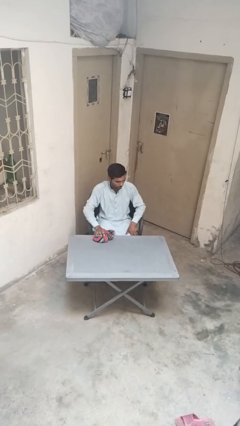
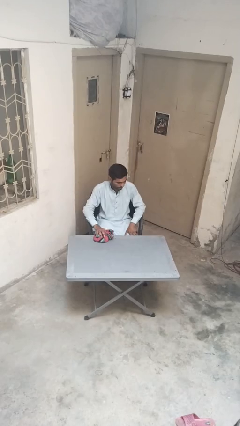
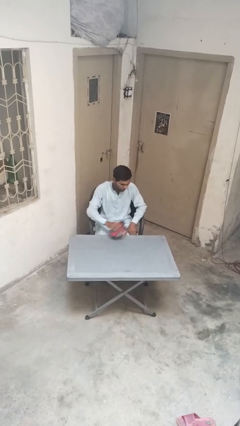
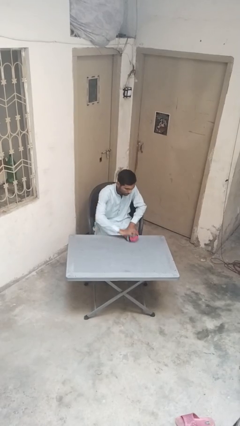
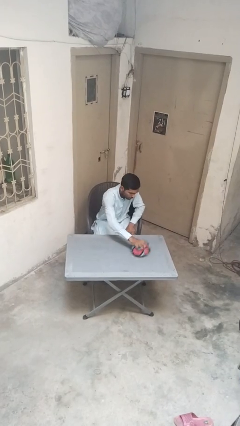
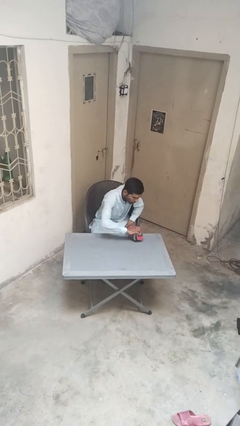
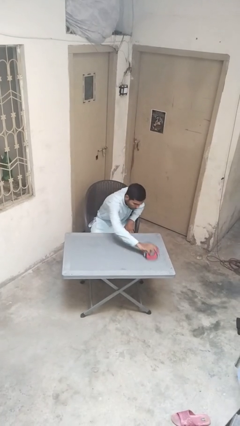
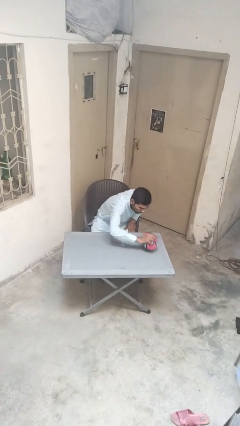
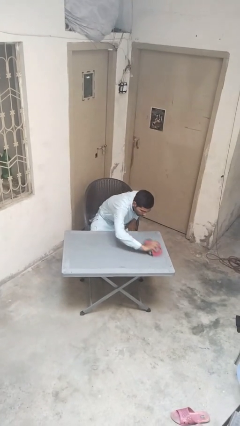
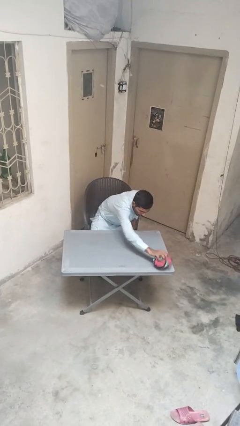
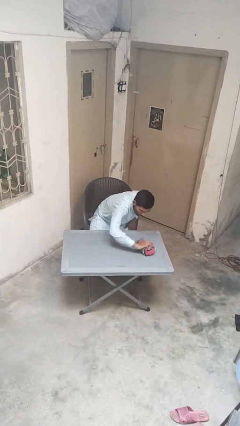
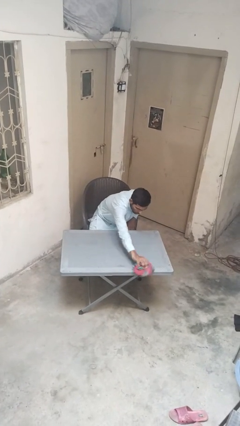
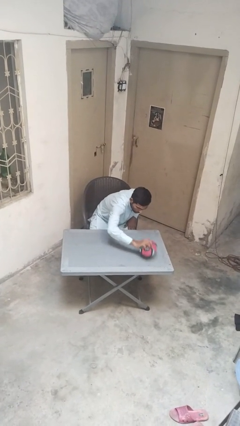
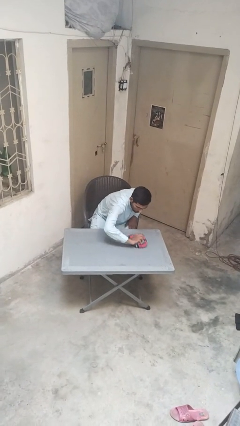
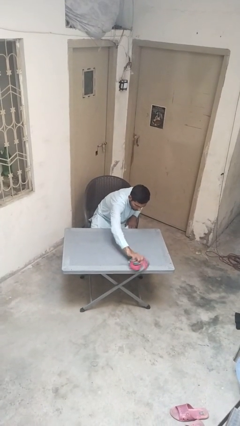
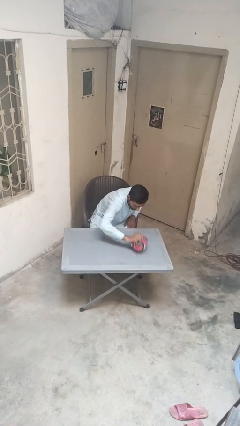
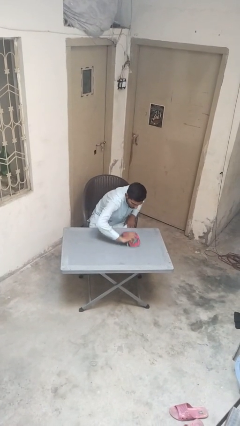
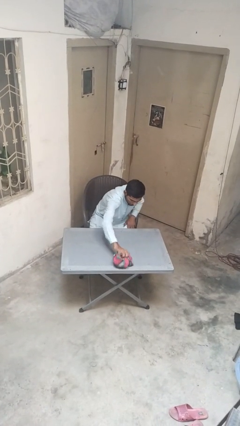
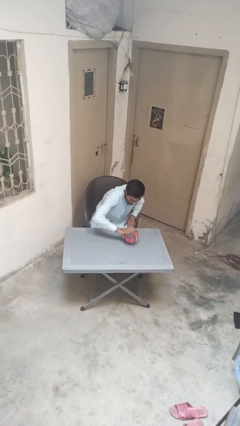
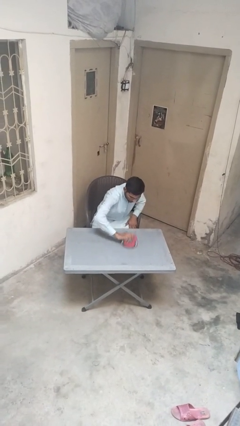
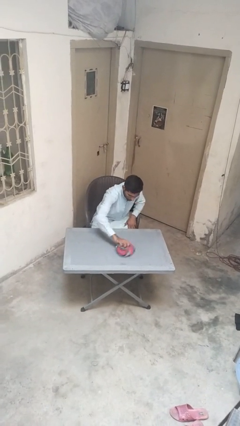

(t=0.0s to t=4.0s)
person cleans table with rag

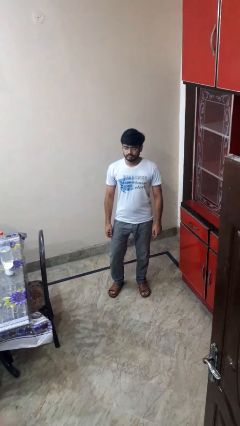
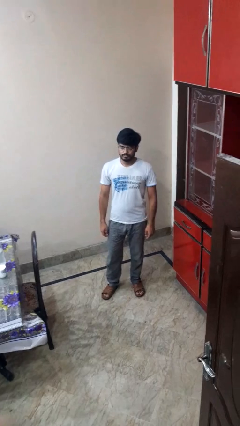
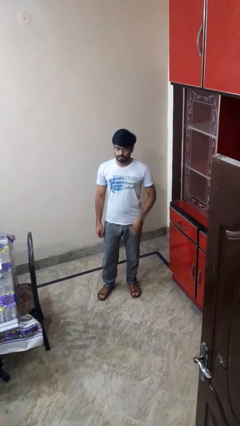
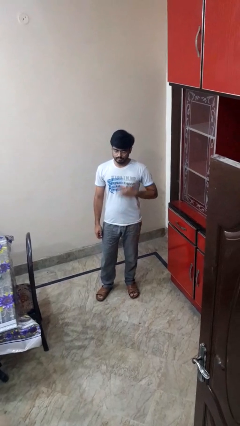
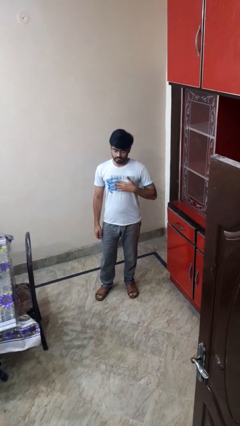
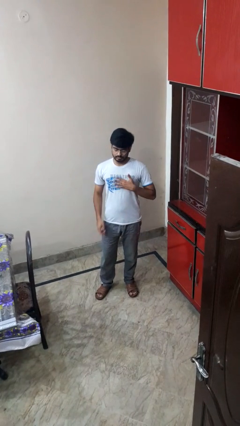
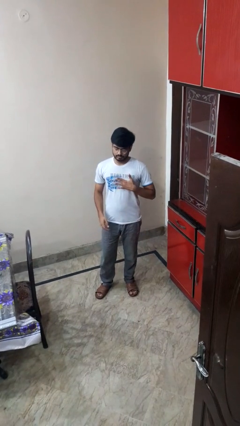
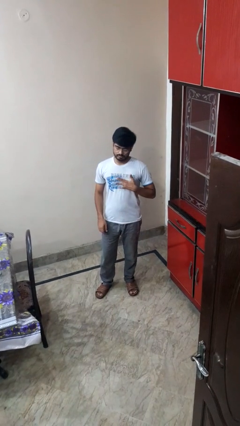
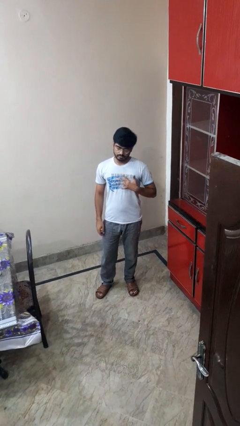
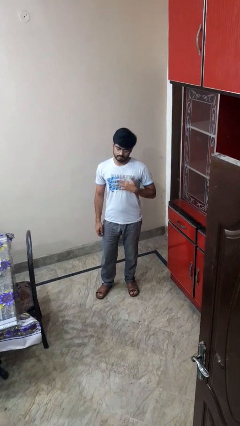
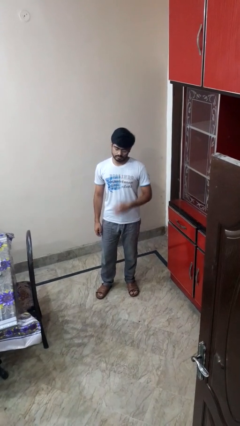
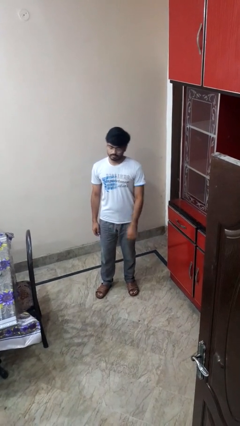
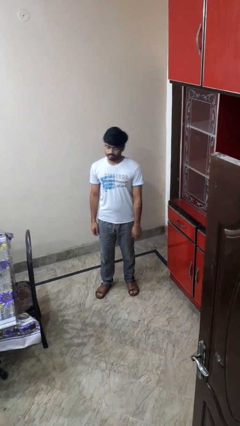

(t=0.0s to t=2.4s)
person drums on chest

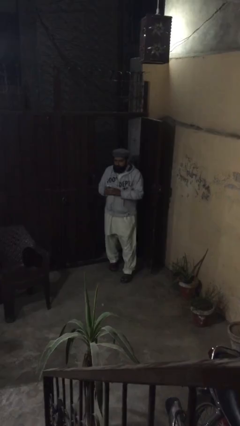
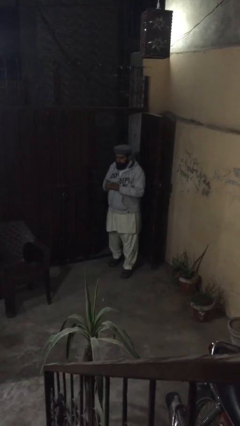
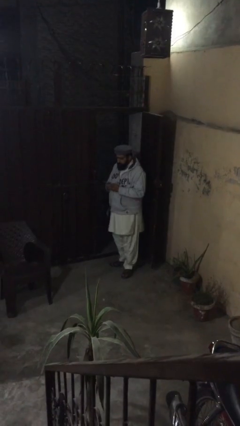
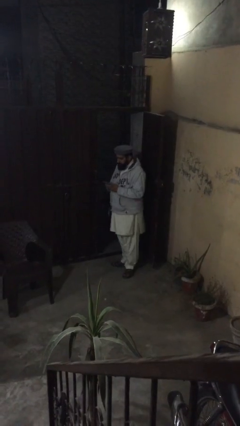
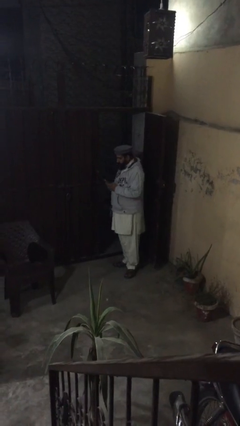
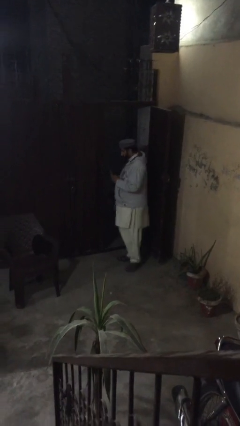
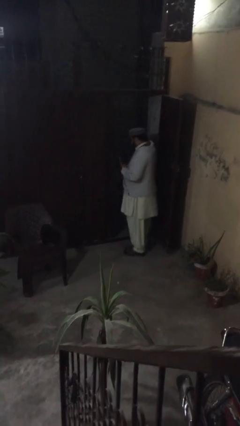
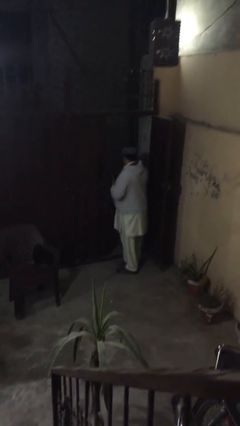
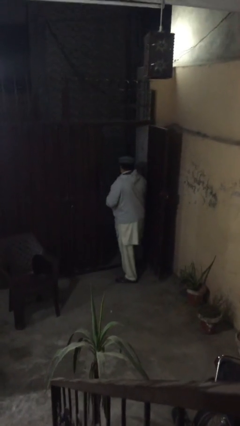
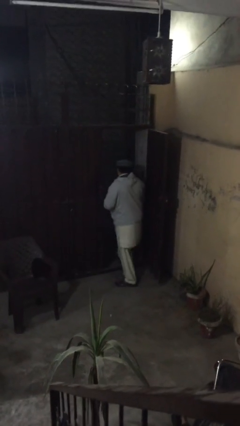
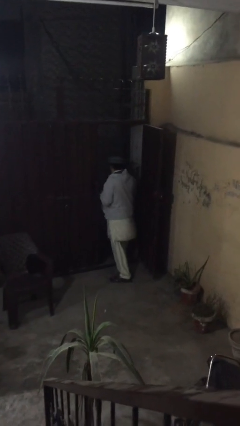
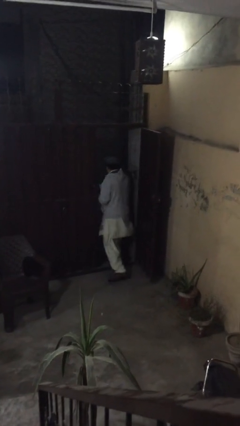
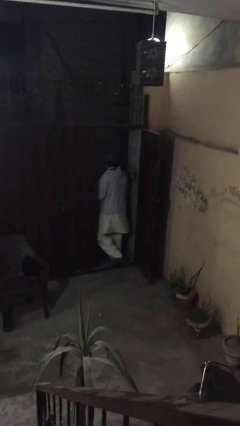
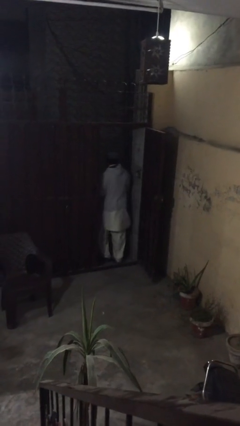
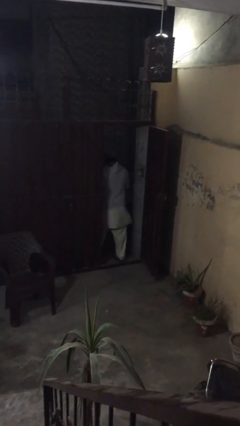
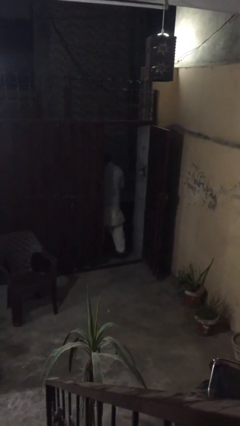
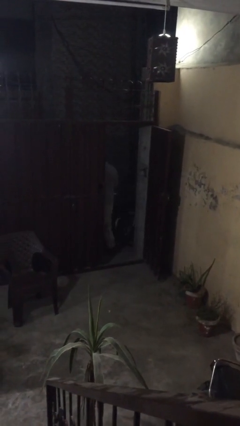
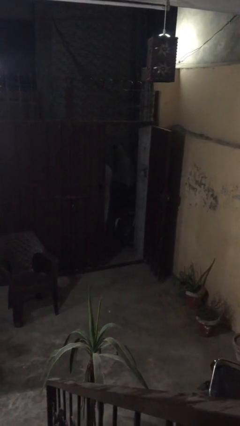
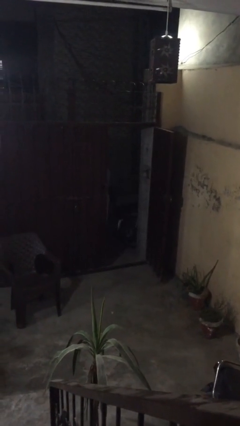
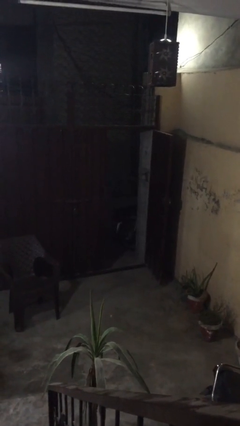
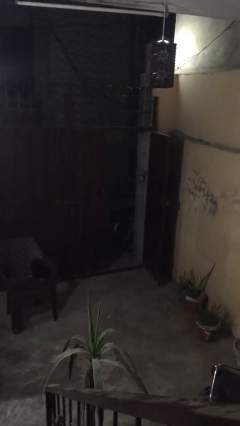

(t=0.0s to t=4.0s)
person exits scene through structure

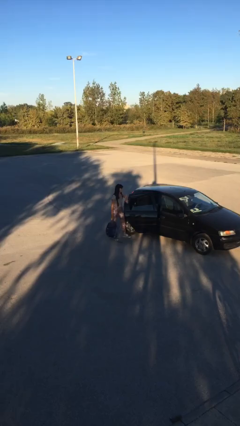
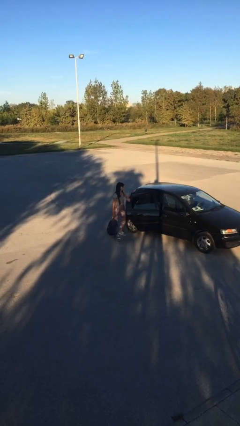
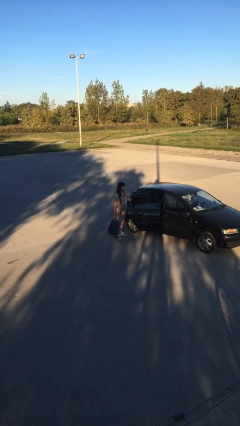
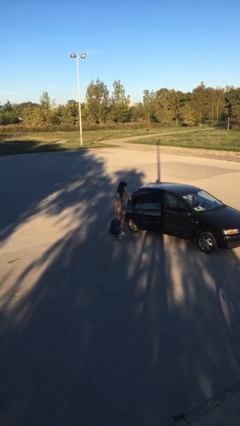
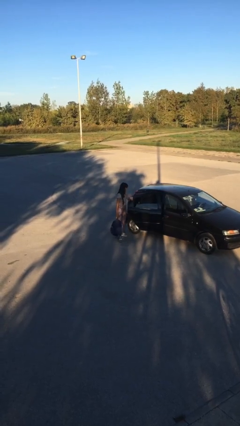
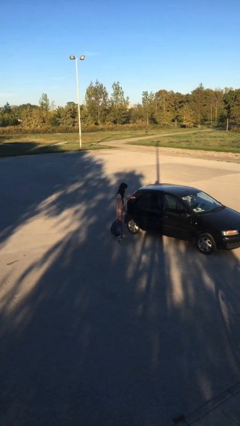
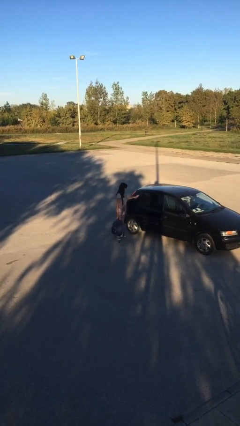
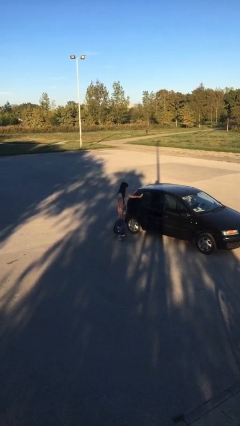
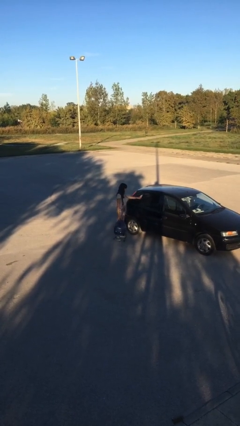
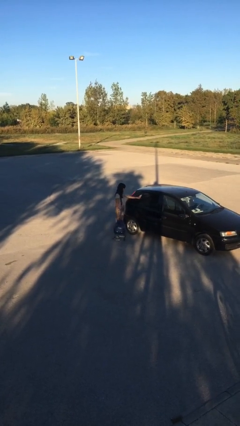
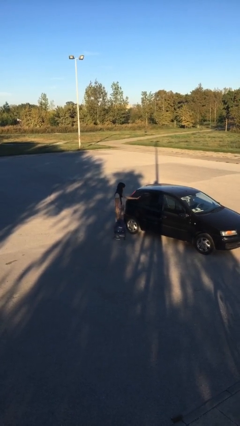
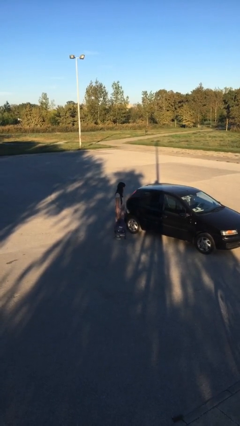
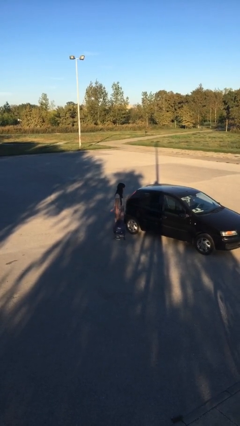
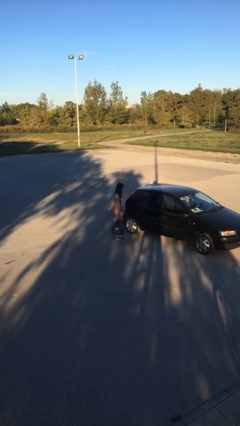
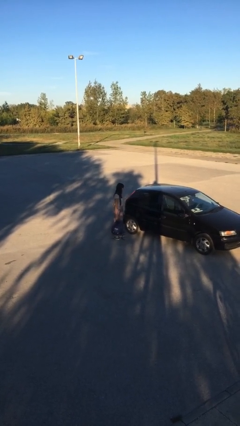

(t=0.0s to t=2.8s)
person closes car door

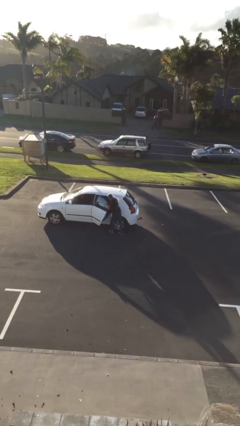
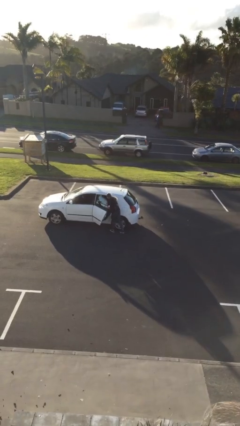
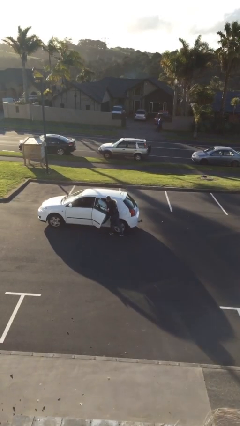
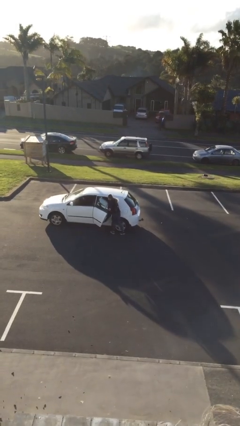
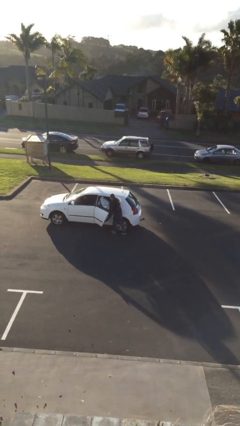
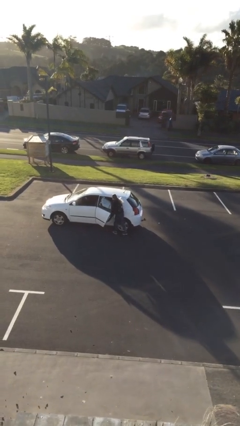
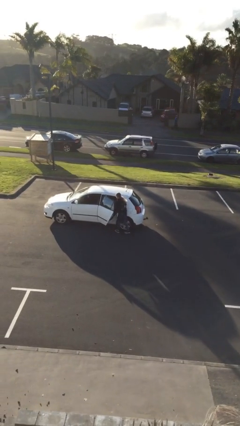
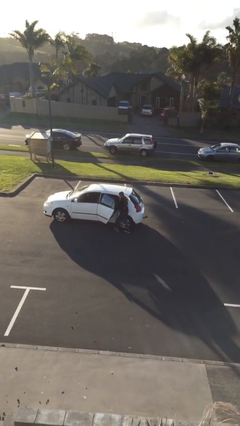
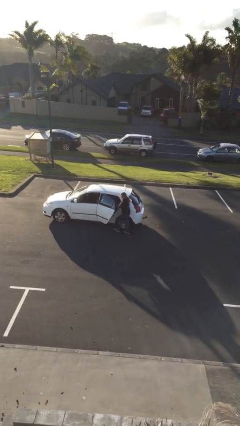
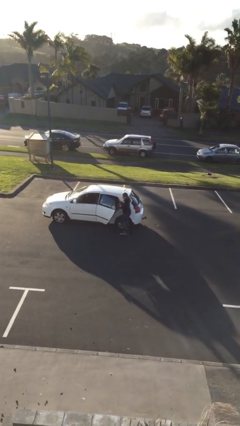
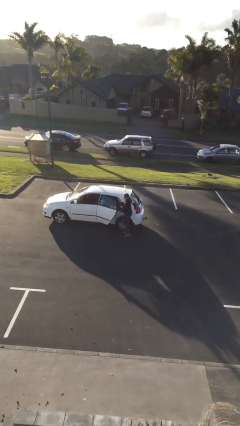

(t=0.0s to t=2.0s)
person unloads car

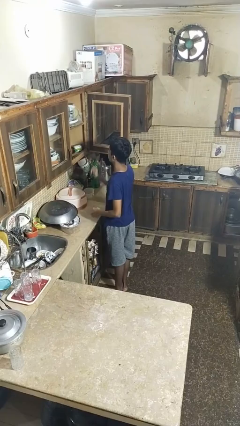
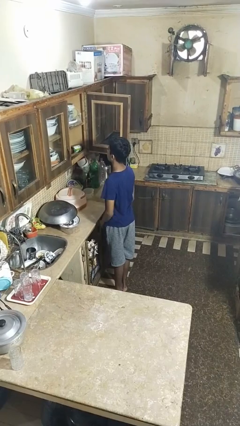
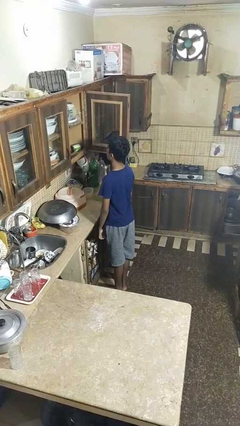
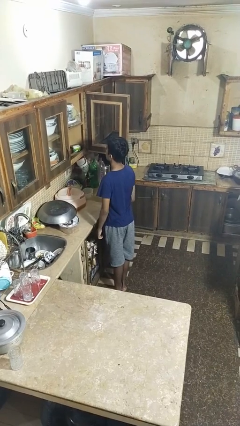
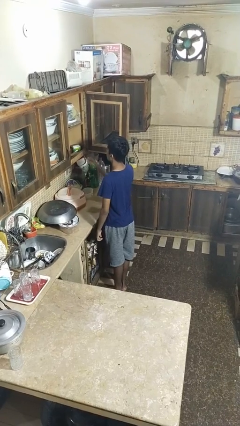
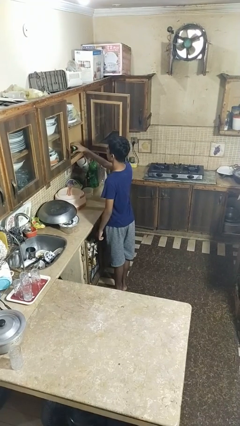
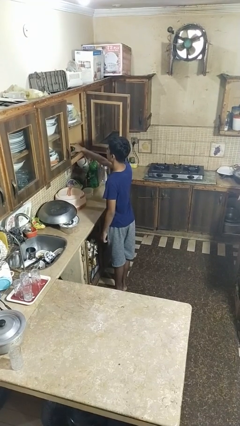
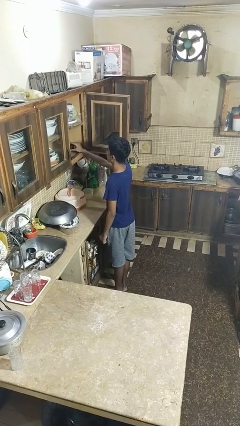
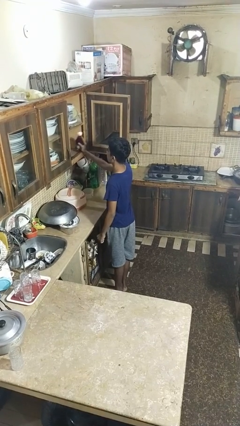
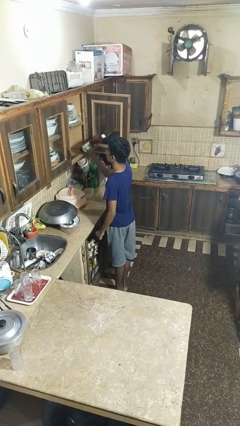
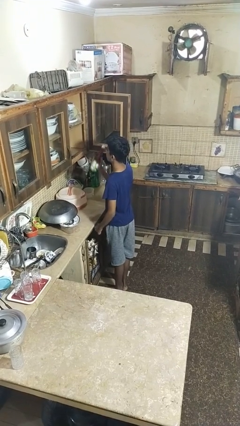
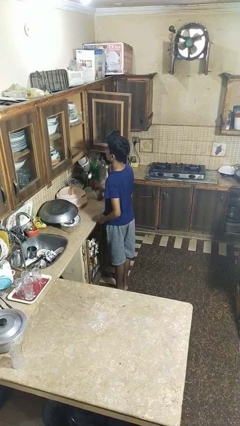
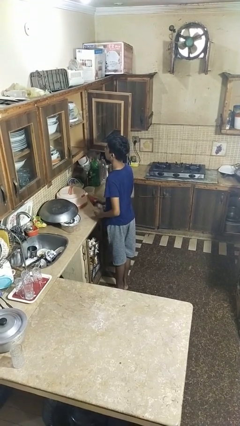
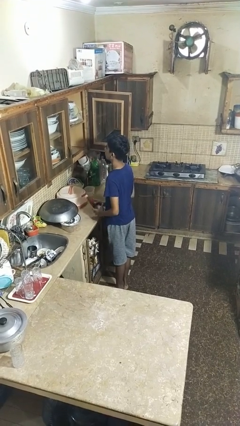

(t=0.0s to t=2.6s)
person takes object from cabinet
